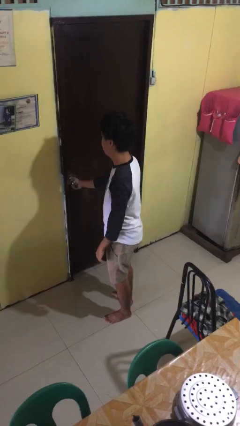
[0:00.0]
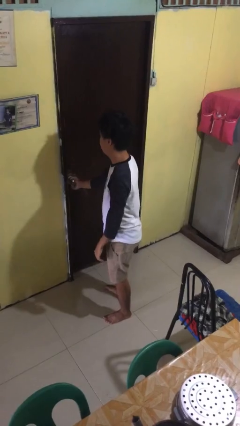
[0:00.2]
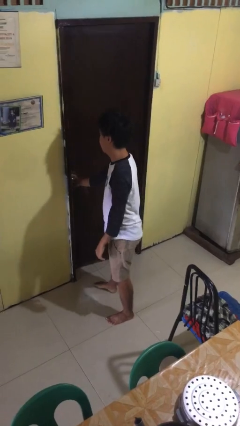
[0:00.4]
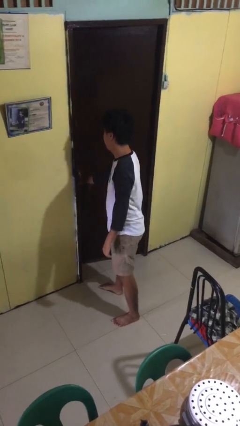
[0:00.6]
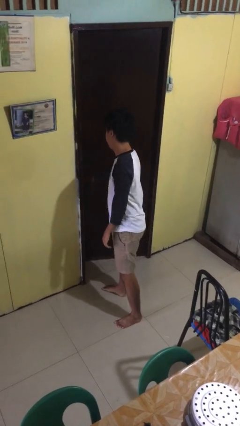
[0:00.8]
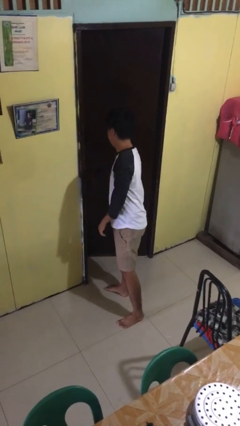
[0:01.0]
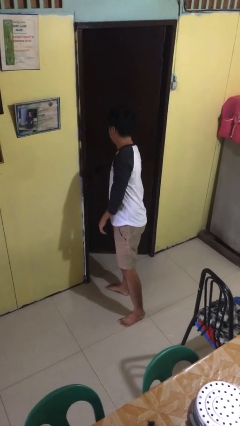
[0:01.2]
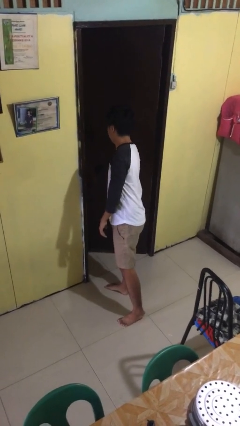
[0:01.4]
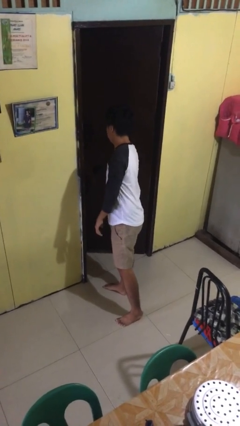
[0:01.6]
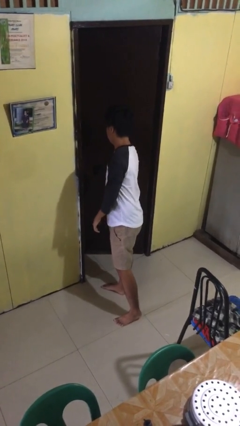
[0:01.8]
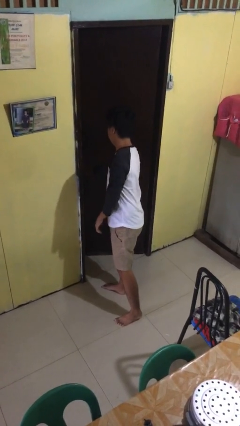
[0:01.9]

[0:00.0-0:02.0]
person opens facility door

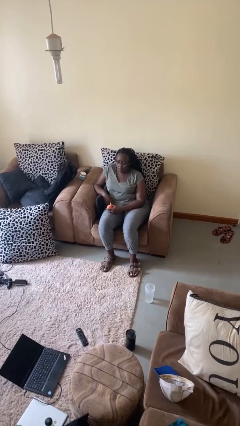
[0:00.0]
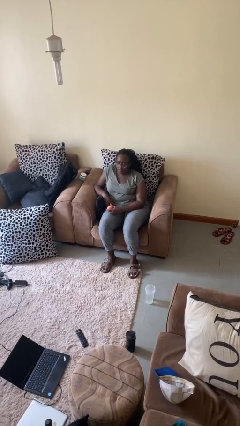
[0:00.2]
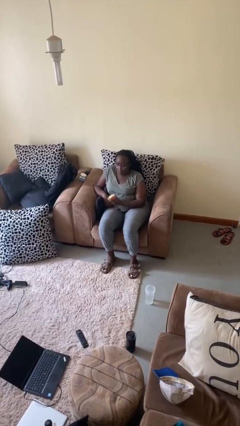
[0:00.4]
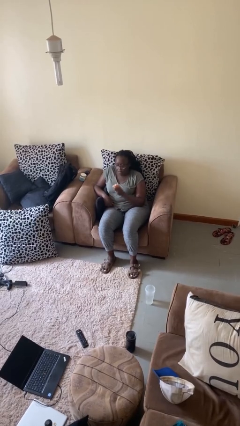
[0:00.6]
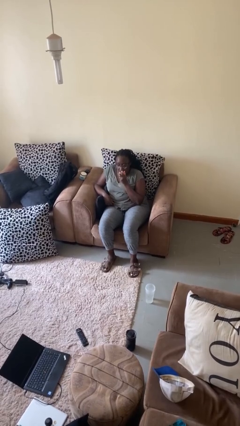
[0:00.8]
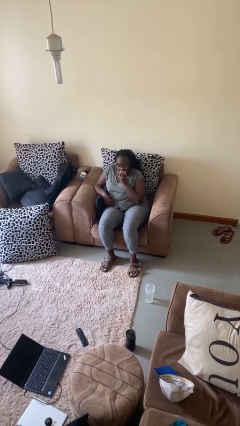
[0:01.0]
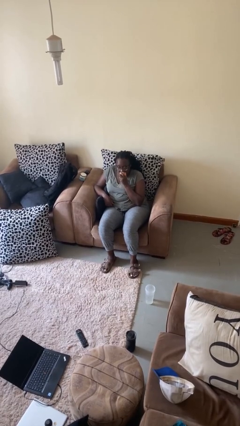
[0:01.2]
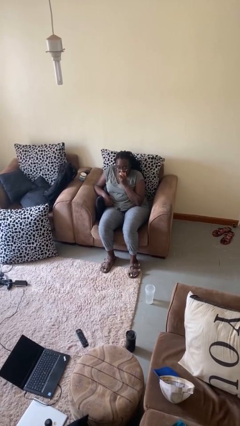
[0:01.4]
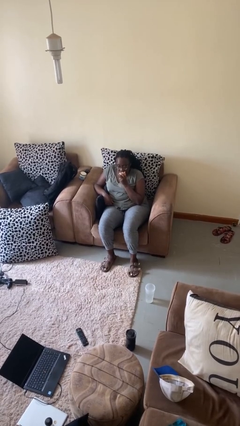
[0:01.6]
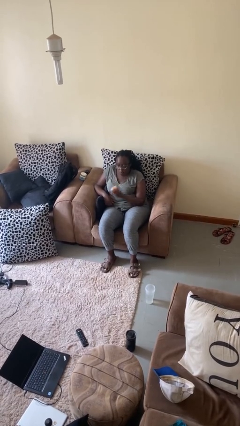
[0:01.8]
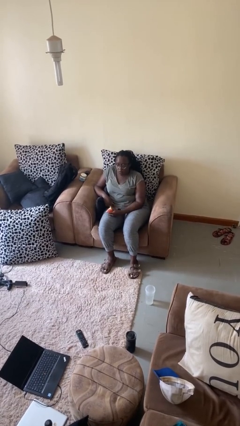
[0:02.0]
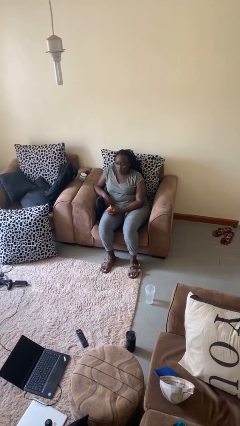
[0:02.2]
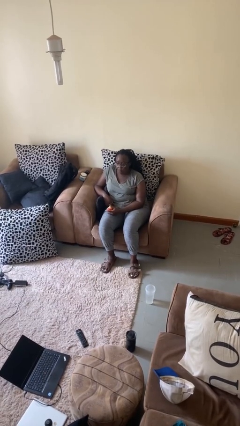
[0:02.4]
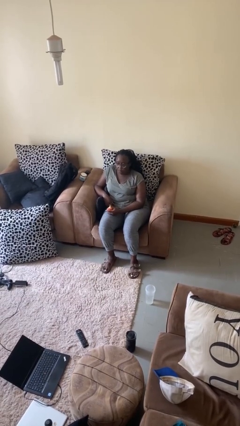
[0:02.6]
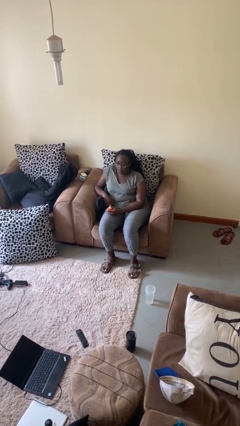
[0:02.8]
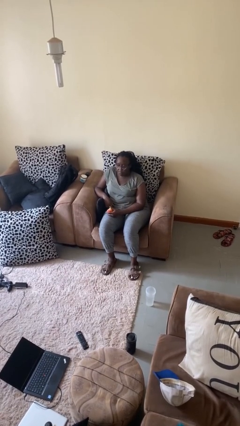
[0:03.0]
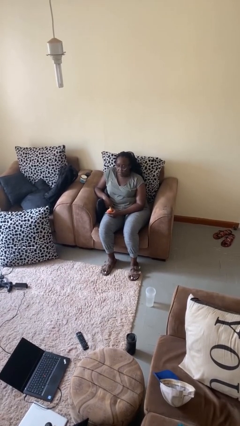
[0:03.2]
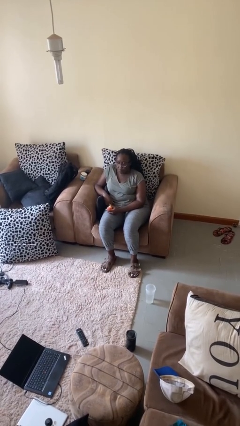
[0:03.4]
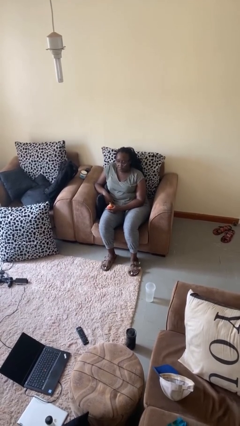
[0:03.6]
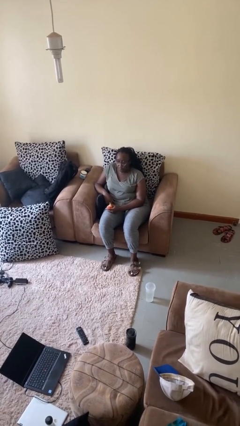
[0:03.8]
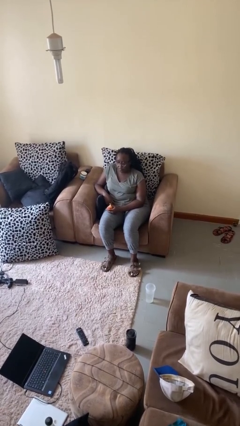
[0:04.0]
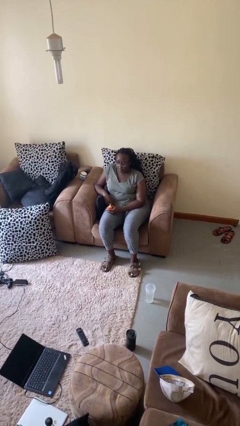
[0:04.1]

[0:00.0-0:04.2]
person eats apple

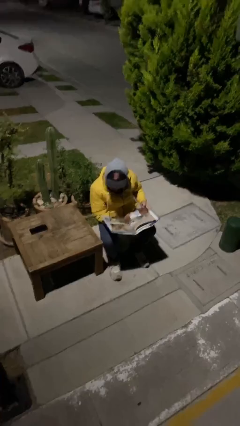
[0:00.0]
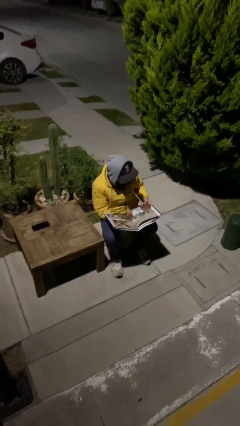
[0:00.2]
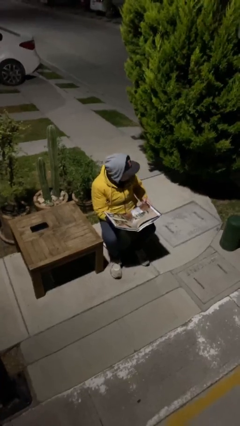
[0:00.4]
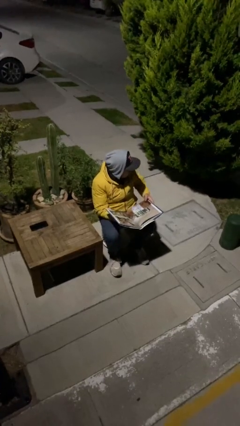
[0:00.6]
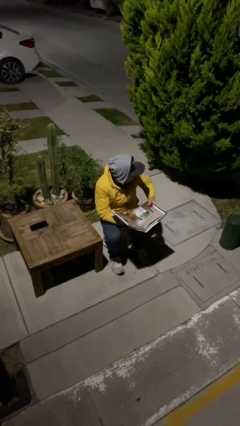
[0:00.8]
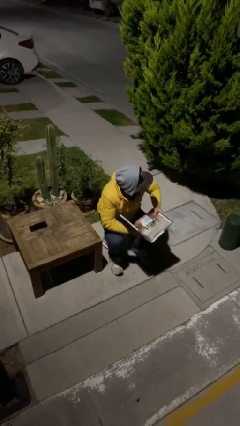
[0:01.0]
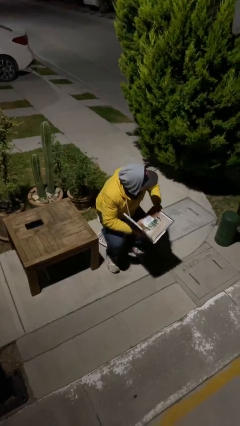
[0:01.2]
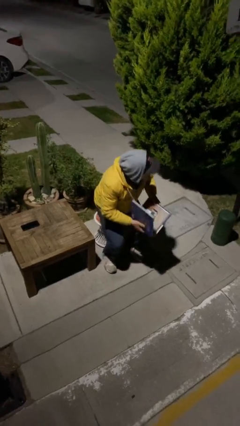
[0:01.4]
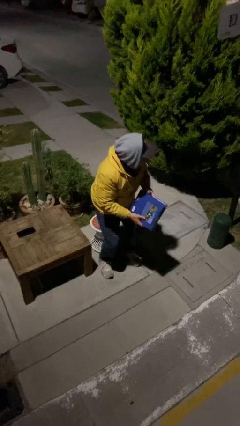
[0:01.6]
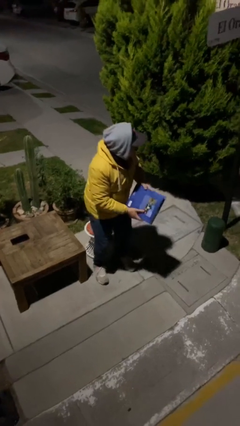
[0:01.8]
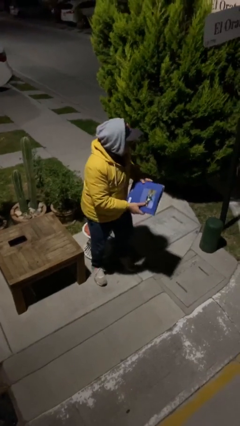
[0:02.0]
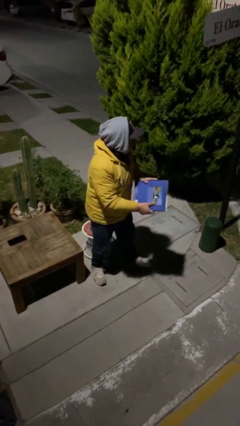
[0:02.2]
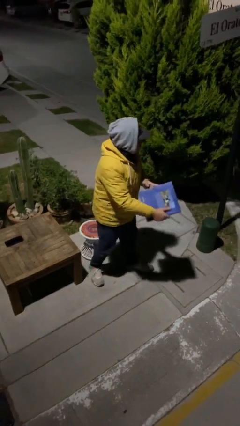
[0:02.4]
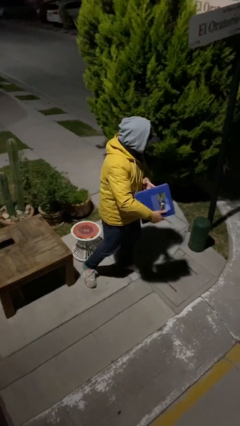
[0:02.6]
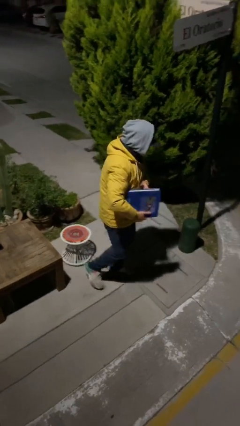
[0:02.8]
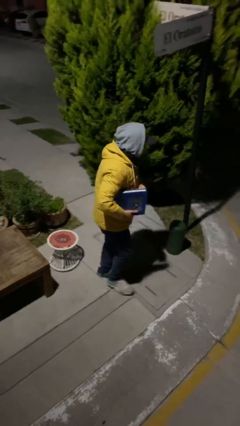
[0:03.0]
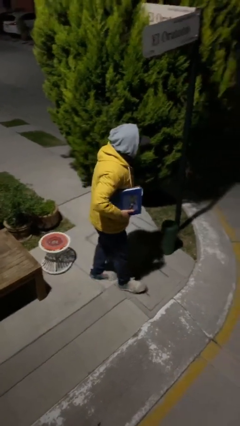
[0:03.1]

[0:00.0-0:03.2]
person stands up

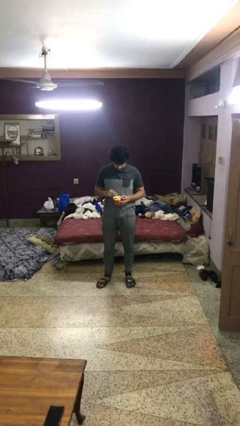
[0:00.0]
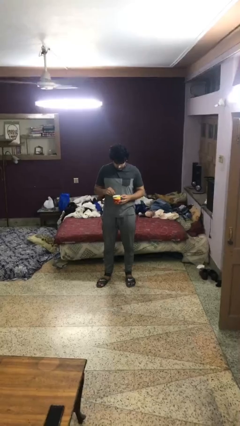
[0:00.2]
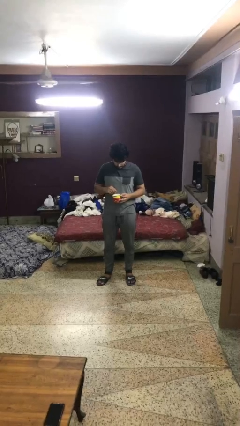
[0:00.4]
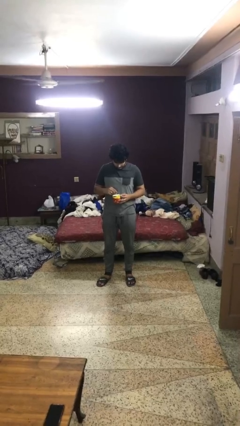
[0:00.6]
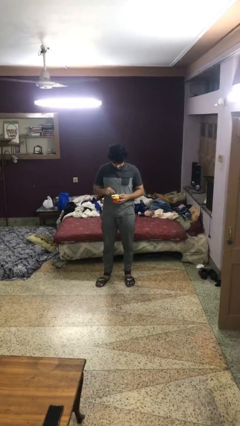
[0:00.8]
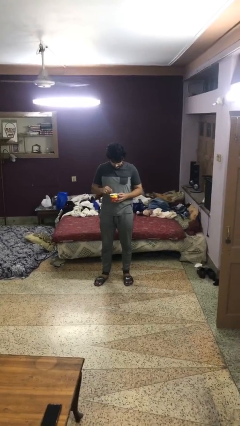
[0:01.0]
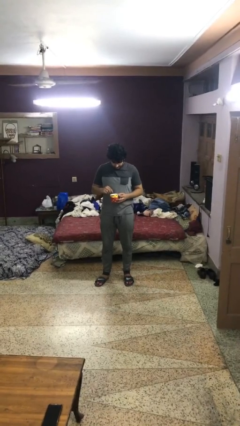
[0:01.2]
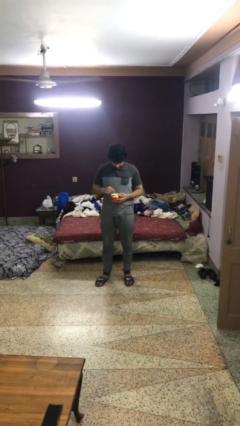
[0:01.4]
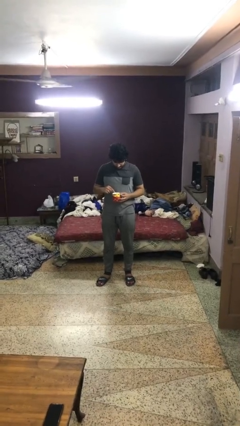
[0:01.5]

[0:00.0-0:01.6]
person stirs mug

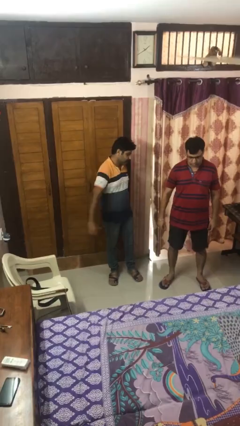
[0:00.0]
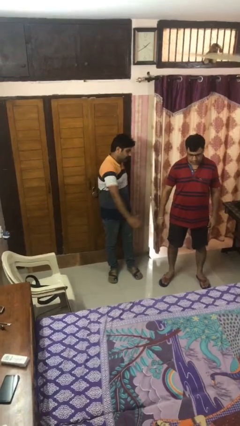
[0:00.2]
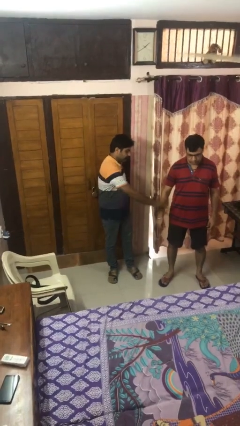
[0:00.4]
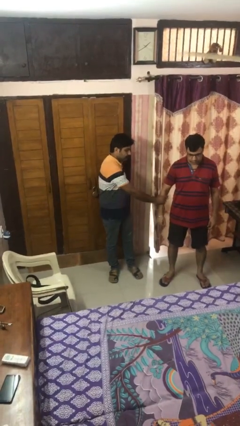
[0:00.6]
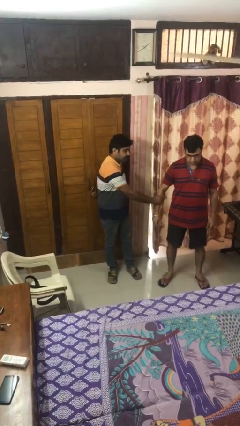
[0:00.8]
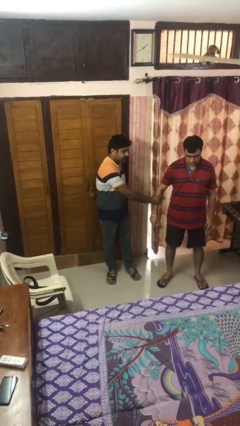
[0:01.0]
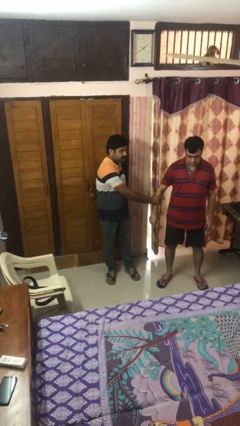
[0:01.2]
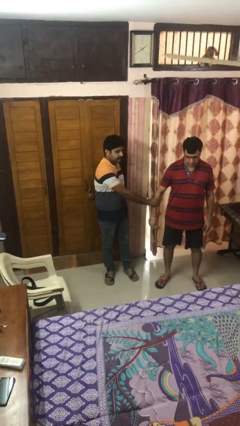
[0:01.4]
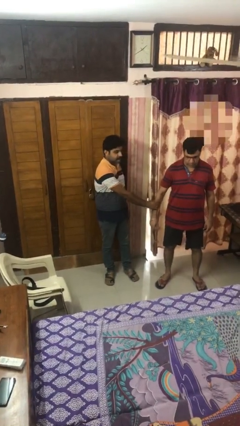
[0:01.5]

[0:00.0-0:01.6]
person grabs person by forearm

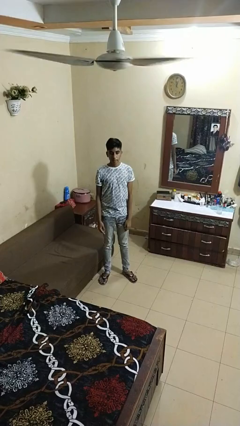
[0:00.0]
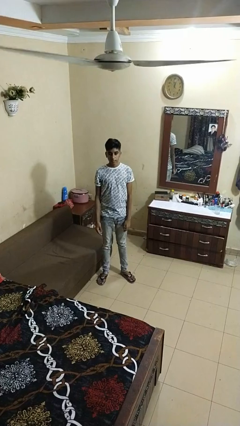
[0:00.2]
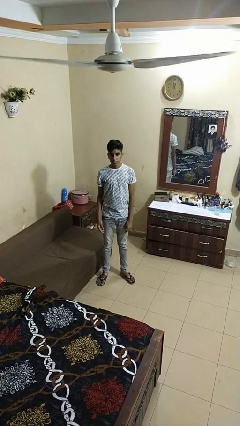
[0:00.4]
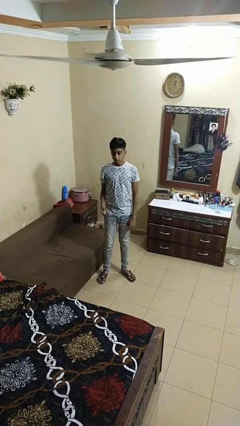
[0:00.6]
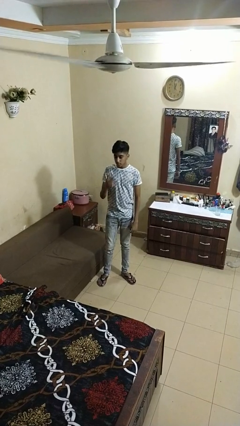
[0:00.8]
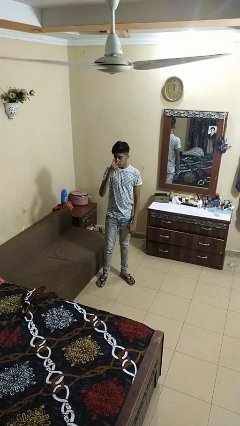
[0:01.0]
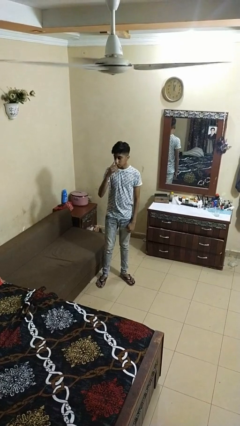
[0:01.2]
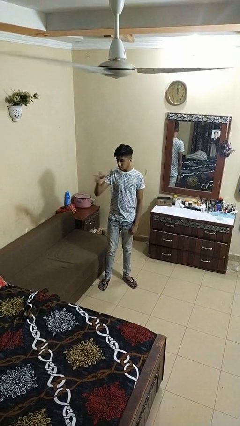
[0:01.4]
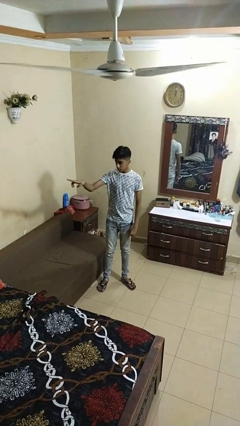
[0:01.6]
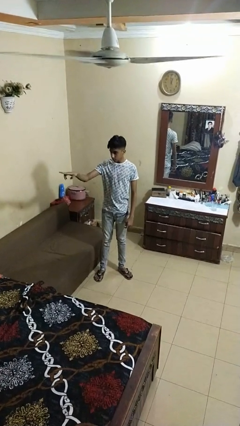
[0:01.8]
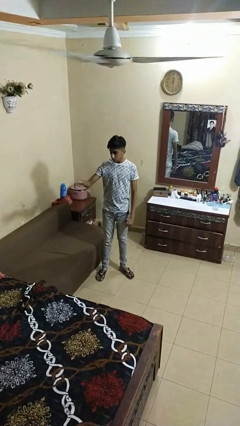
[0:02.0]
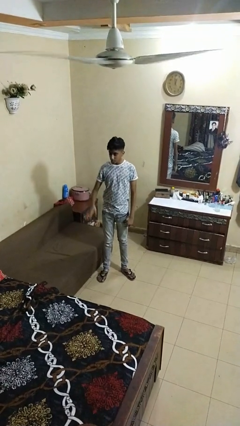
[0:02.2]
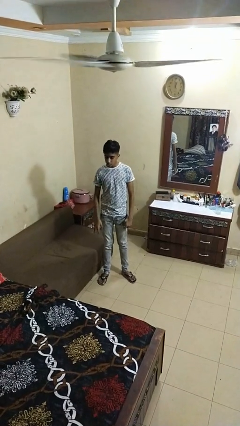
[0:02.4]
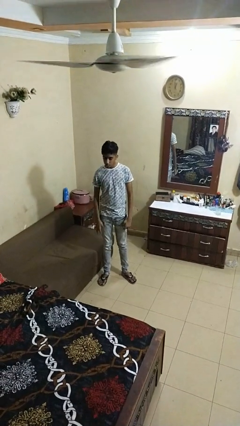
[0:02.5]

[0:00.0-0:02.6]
person gestures watch closely

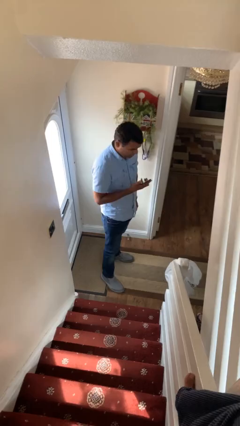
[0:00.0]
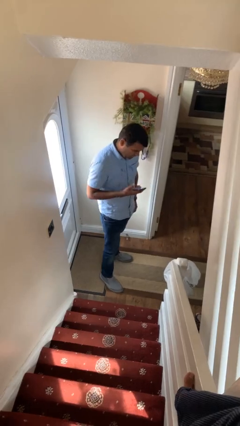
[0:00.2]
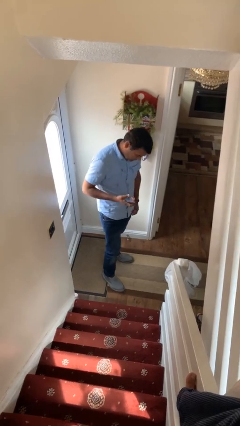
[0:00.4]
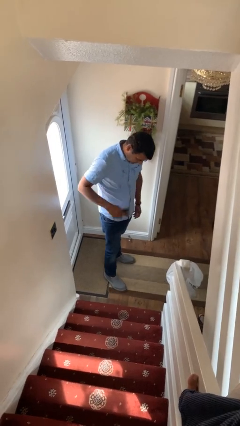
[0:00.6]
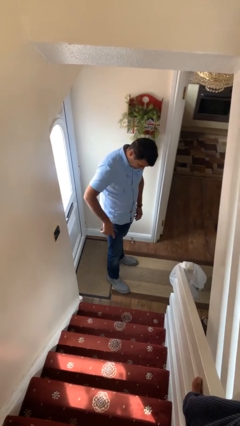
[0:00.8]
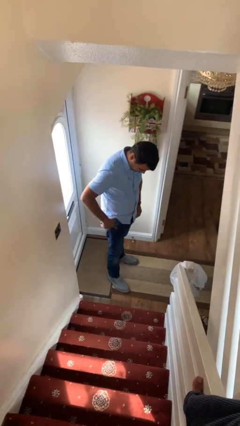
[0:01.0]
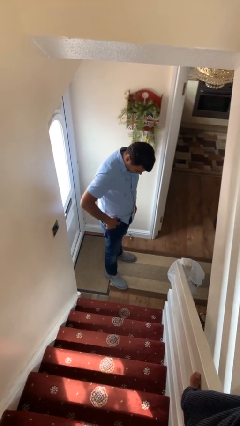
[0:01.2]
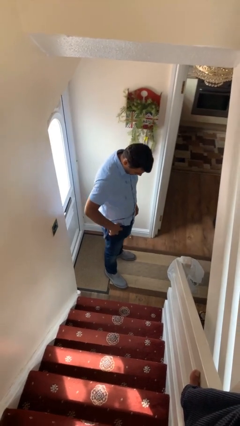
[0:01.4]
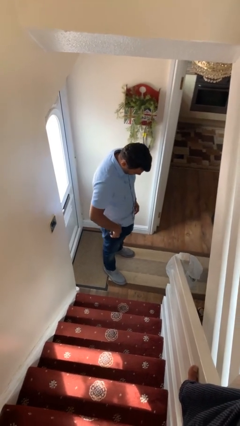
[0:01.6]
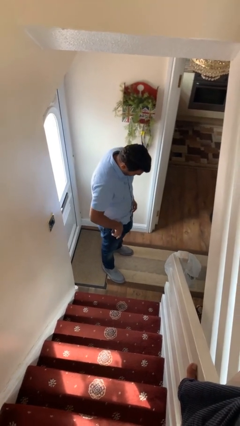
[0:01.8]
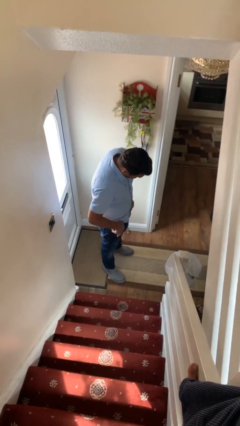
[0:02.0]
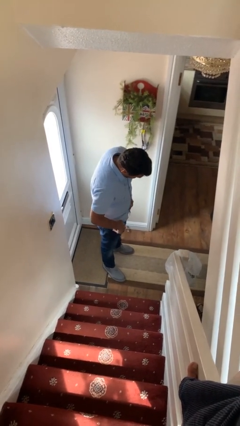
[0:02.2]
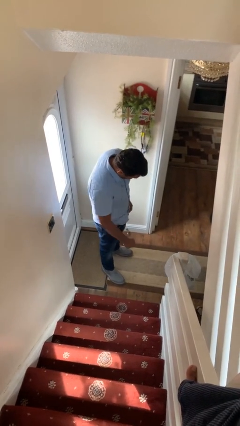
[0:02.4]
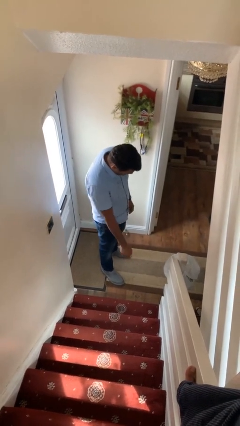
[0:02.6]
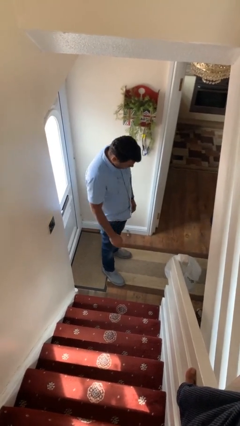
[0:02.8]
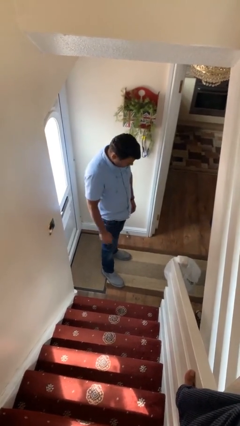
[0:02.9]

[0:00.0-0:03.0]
person puts phone into pocket
